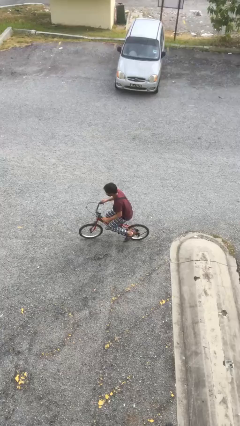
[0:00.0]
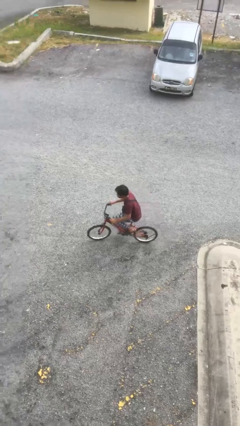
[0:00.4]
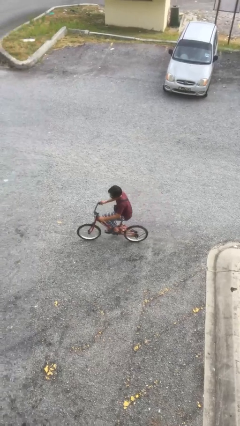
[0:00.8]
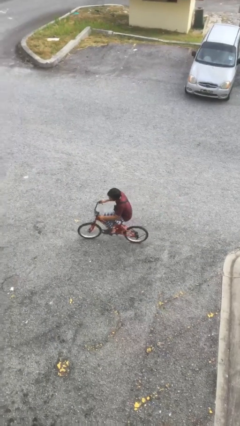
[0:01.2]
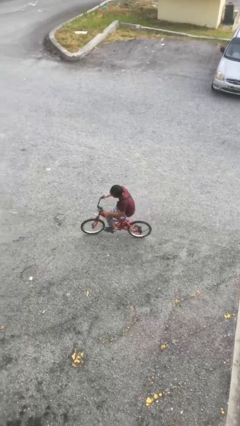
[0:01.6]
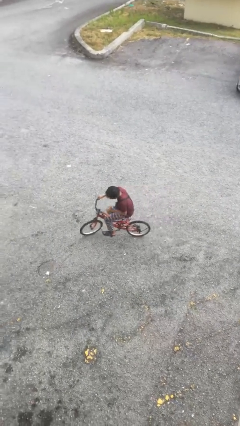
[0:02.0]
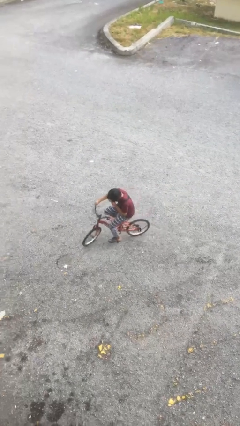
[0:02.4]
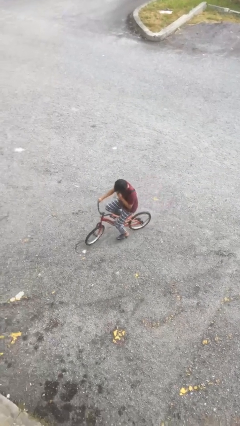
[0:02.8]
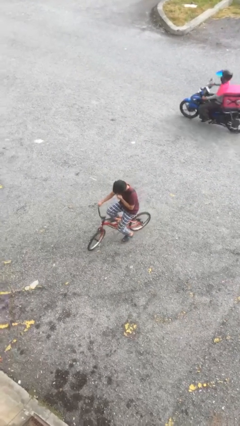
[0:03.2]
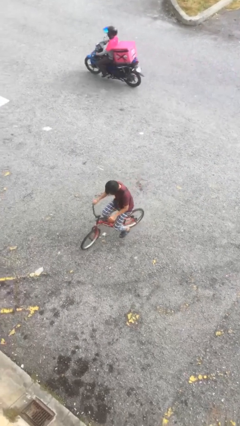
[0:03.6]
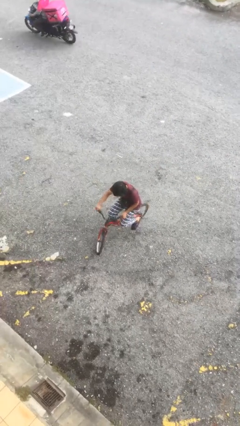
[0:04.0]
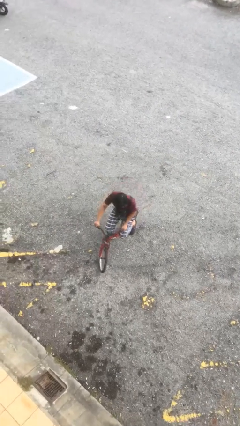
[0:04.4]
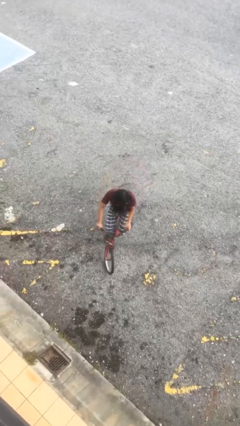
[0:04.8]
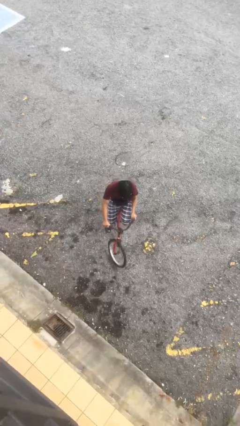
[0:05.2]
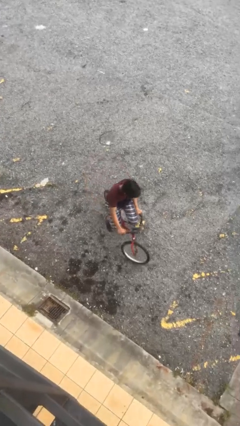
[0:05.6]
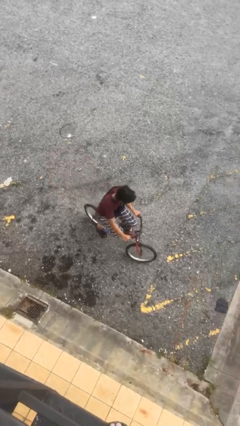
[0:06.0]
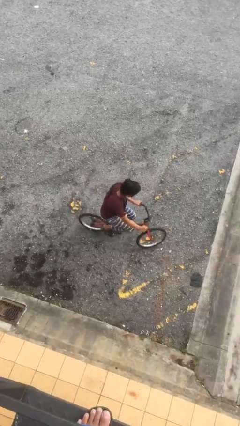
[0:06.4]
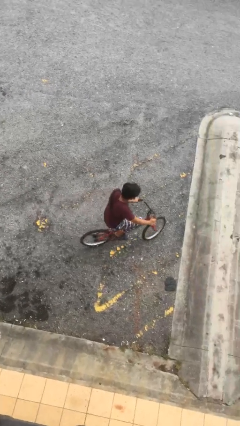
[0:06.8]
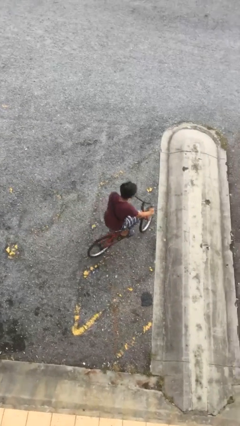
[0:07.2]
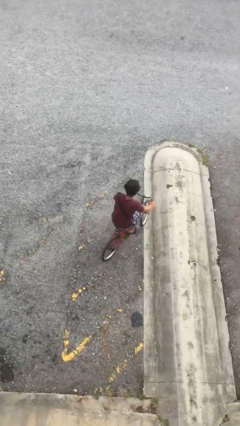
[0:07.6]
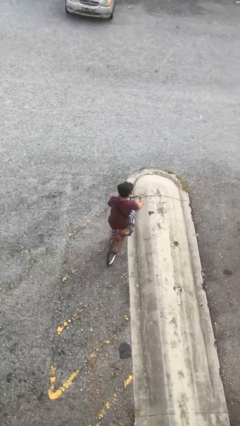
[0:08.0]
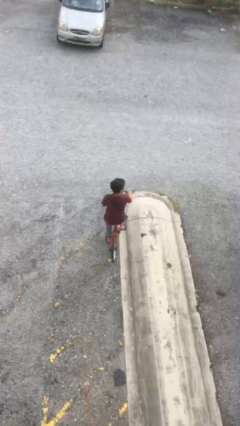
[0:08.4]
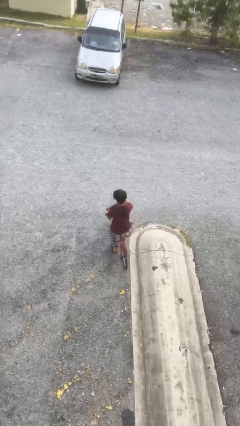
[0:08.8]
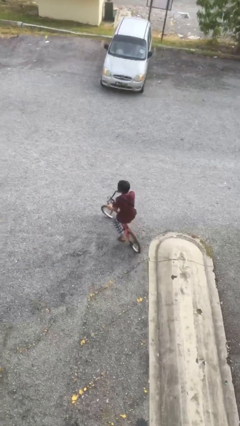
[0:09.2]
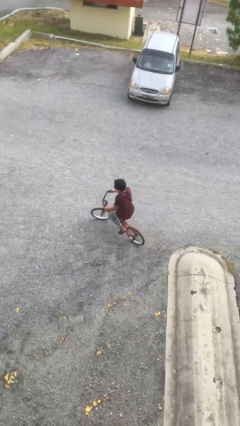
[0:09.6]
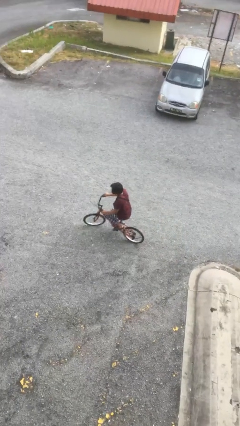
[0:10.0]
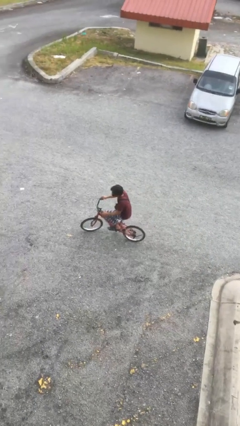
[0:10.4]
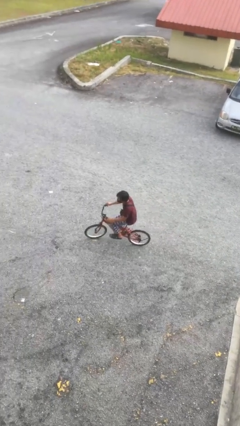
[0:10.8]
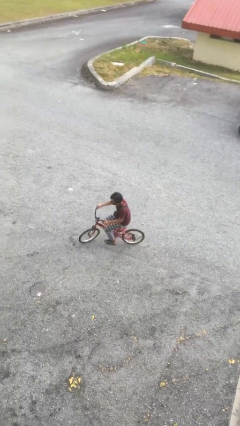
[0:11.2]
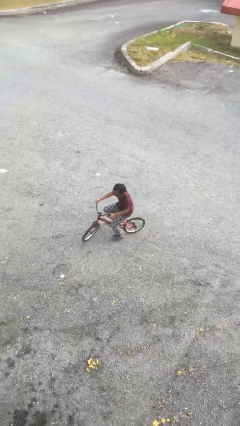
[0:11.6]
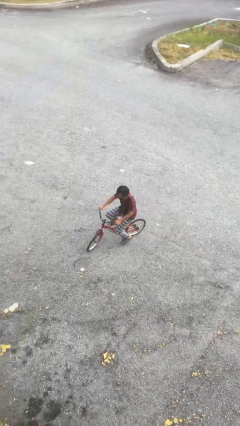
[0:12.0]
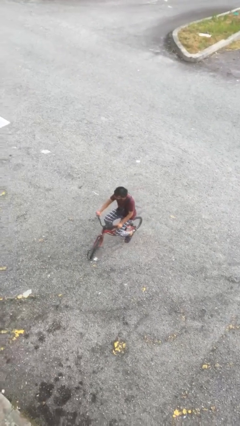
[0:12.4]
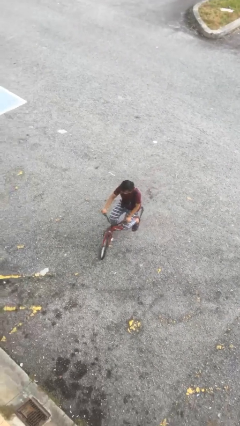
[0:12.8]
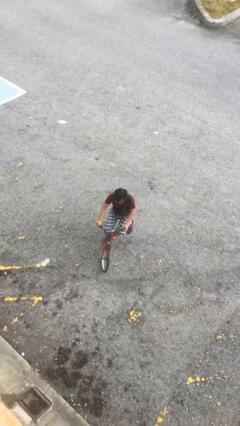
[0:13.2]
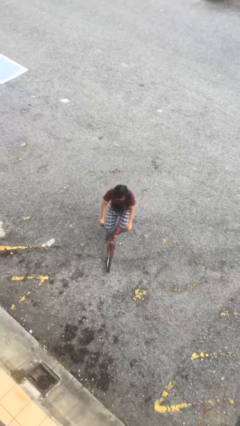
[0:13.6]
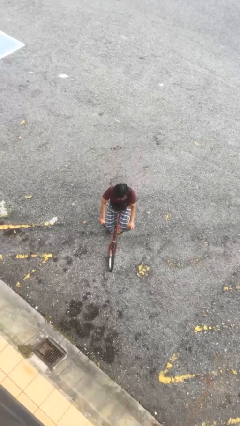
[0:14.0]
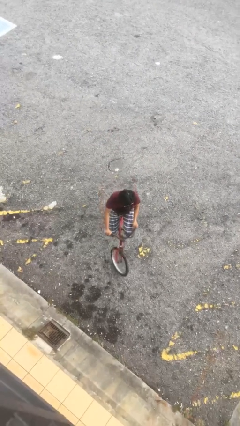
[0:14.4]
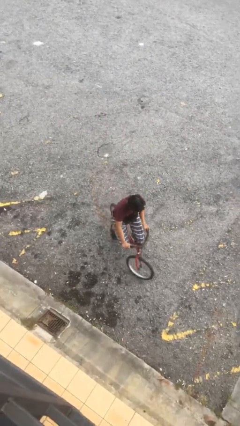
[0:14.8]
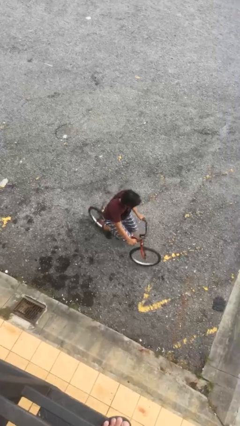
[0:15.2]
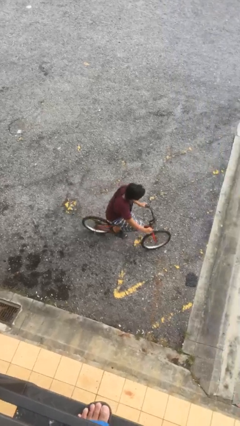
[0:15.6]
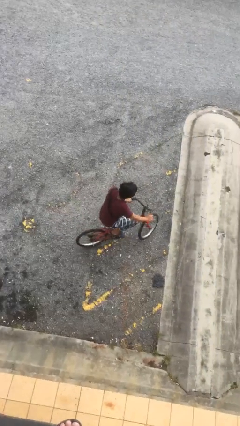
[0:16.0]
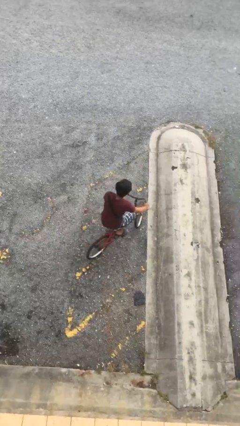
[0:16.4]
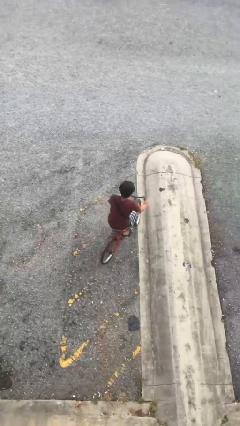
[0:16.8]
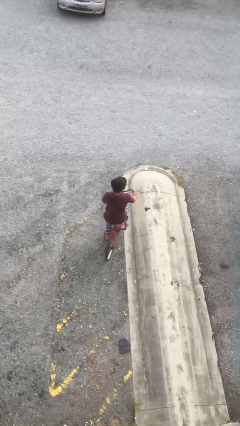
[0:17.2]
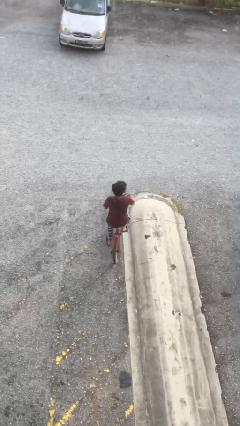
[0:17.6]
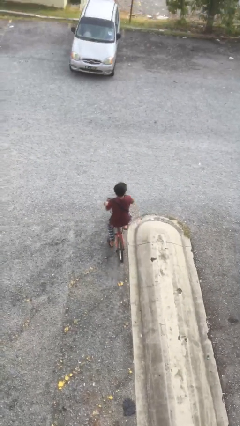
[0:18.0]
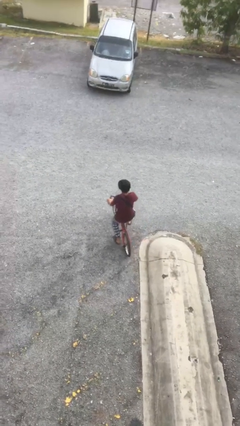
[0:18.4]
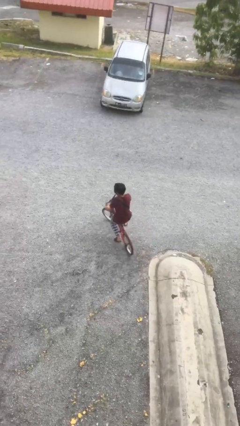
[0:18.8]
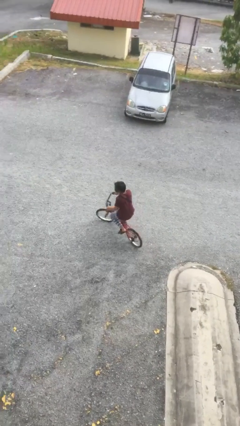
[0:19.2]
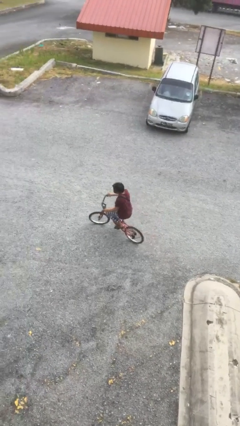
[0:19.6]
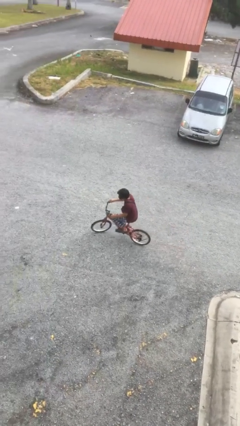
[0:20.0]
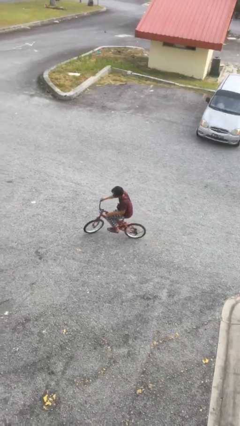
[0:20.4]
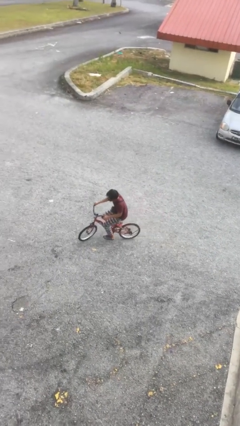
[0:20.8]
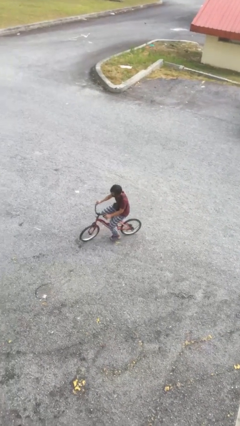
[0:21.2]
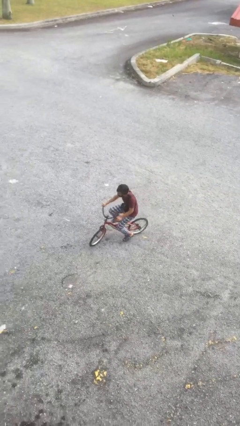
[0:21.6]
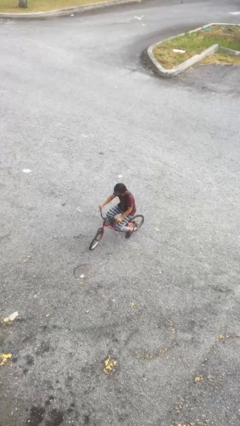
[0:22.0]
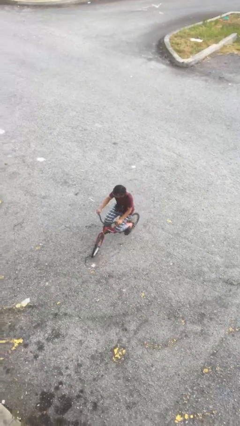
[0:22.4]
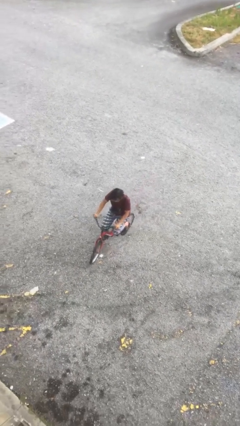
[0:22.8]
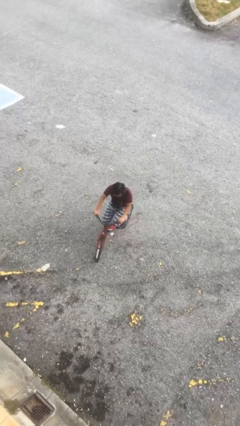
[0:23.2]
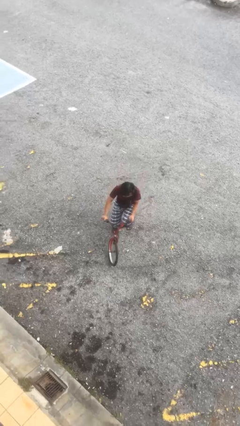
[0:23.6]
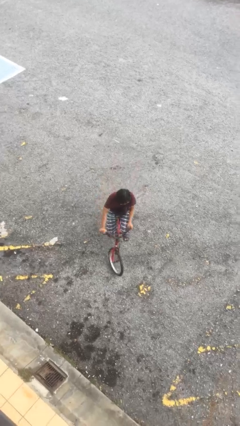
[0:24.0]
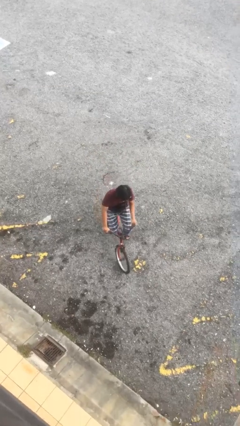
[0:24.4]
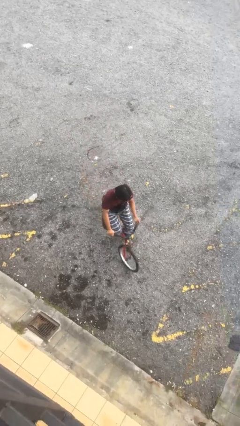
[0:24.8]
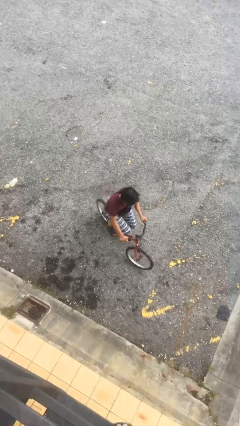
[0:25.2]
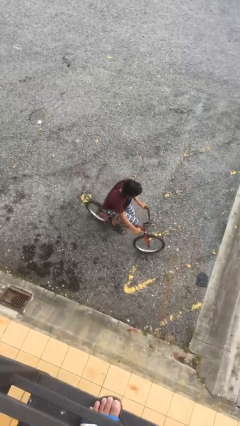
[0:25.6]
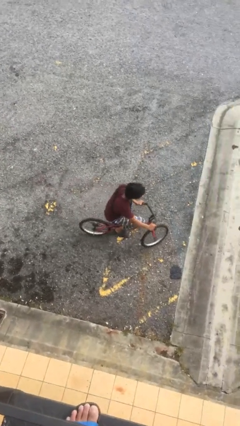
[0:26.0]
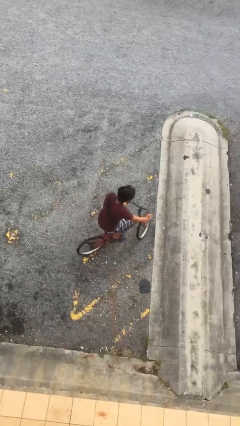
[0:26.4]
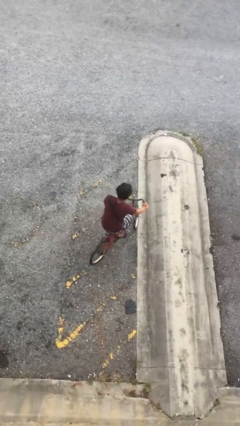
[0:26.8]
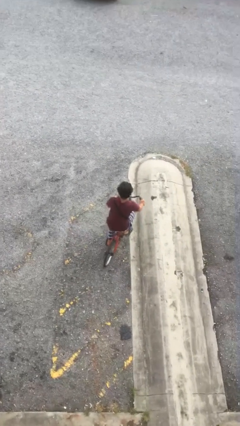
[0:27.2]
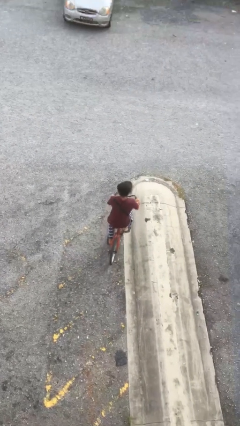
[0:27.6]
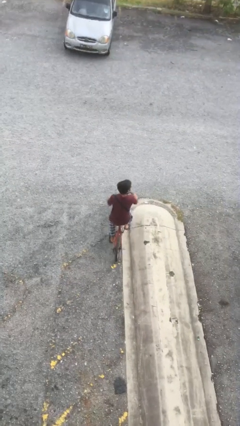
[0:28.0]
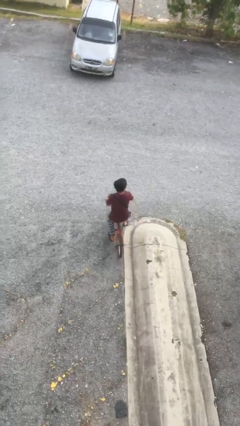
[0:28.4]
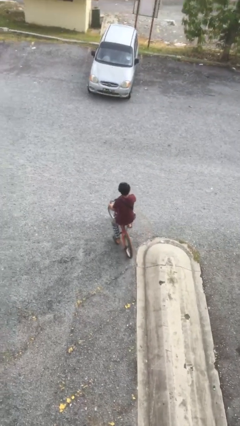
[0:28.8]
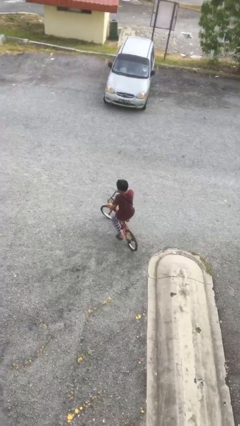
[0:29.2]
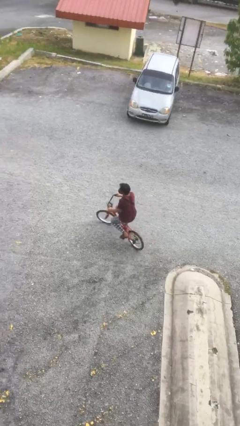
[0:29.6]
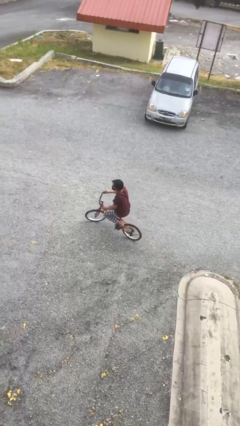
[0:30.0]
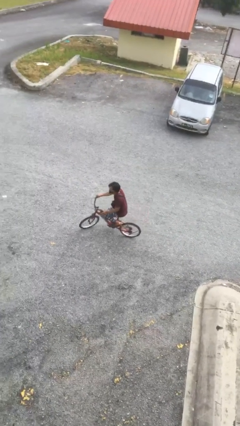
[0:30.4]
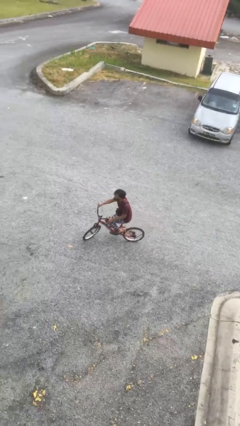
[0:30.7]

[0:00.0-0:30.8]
person rides bicycle

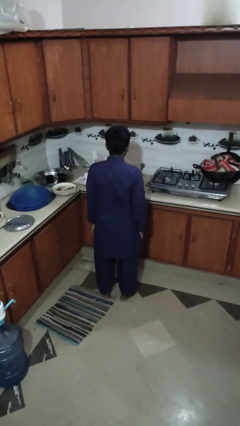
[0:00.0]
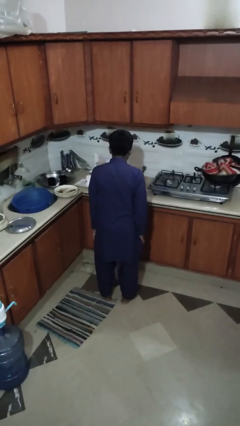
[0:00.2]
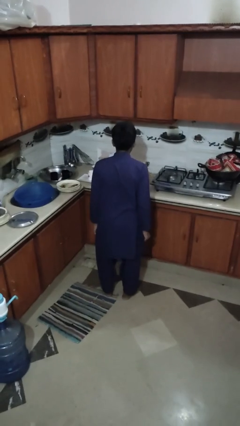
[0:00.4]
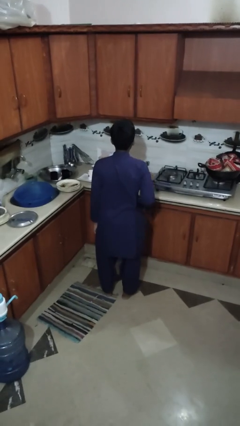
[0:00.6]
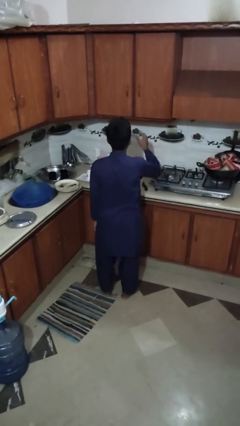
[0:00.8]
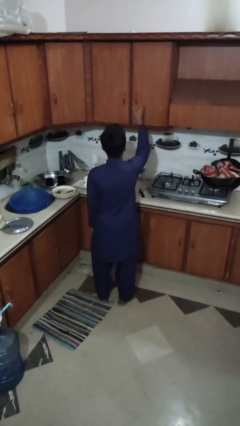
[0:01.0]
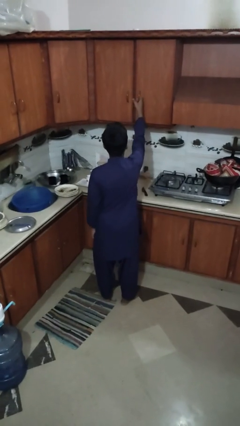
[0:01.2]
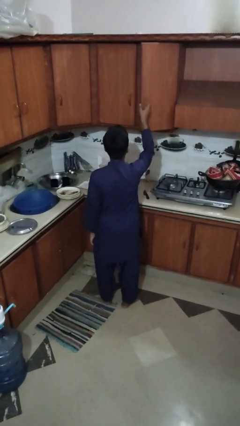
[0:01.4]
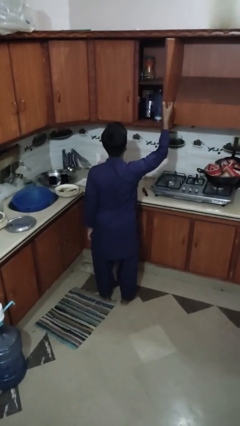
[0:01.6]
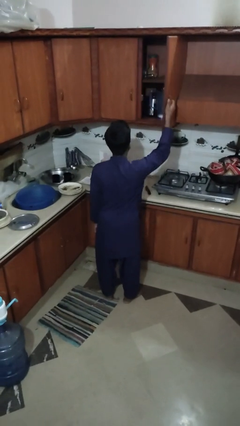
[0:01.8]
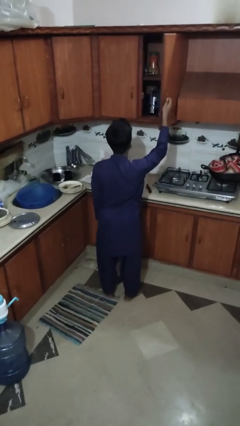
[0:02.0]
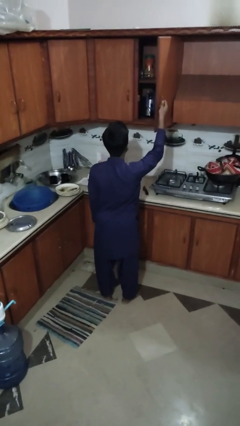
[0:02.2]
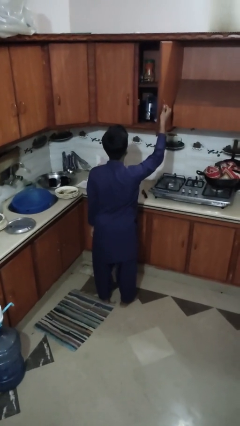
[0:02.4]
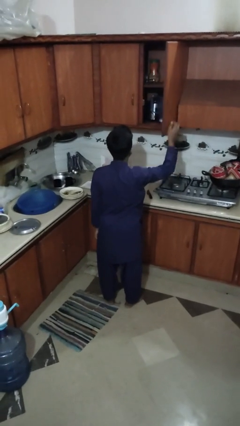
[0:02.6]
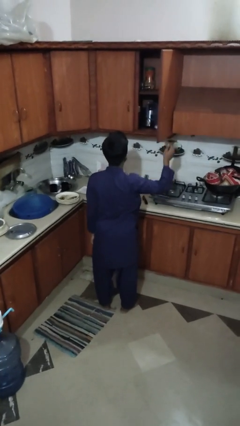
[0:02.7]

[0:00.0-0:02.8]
person opens cabinet
